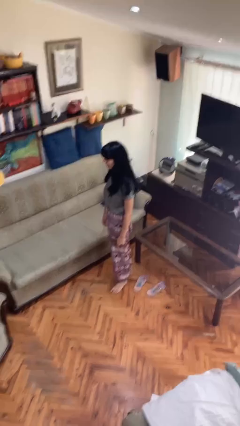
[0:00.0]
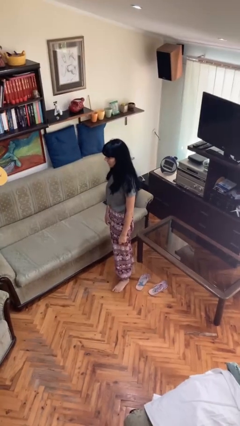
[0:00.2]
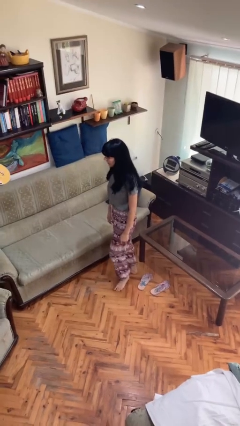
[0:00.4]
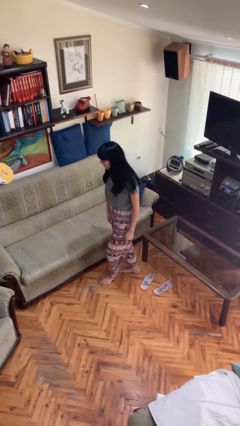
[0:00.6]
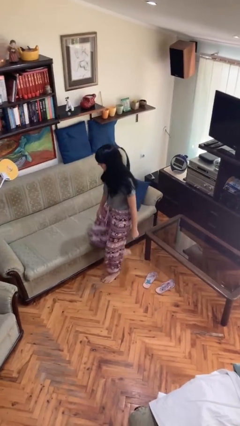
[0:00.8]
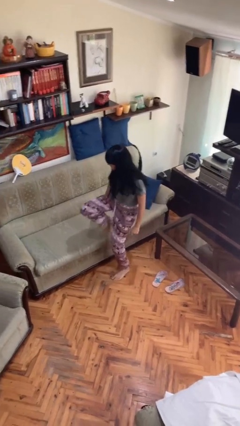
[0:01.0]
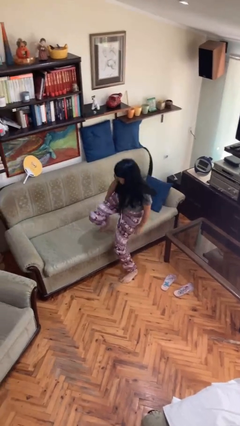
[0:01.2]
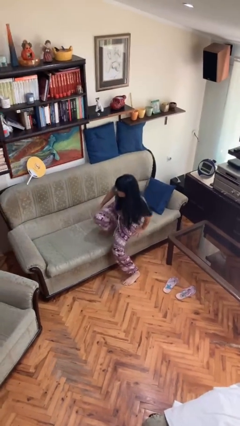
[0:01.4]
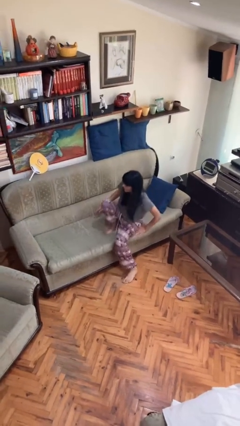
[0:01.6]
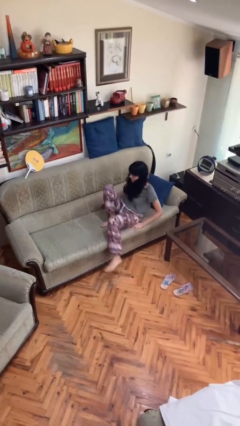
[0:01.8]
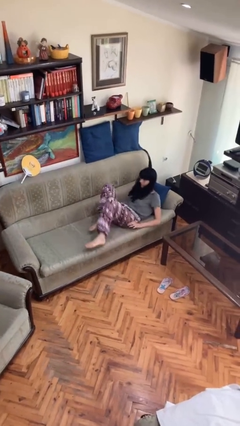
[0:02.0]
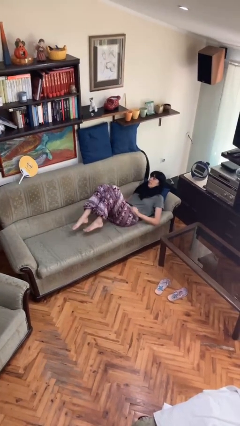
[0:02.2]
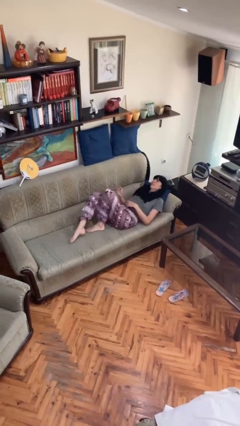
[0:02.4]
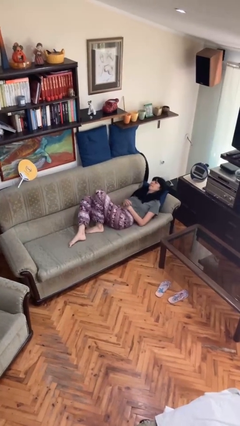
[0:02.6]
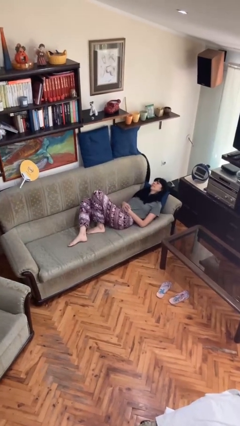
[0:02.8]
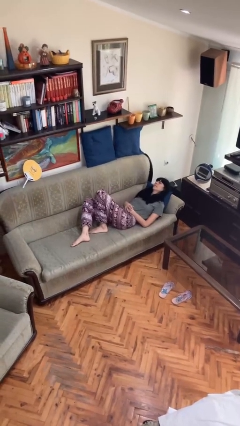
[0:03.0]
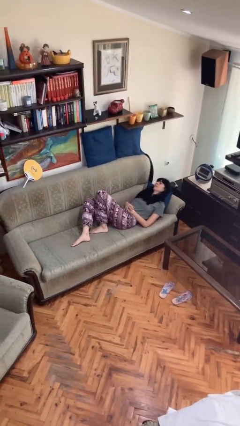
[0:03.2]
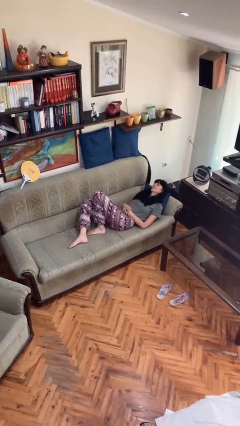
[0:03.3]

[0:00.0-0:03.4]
person lies down on couch

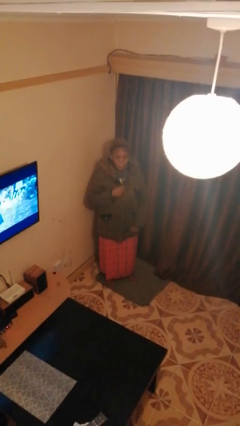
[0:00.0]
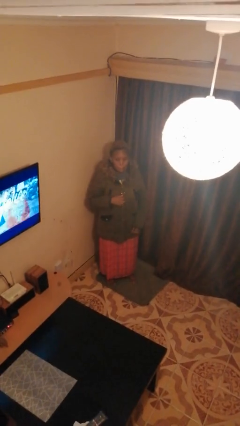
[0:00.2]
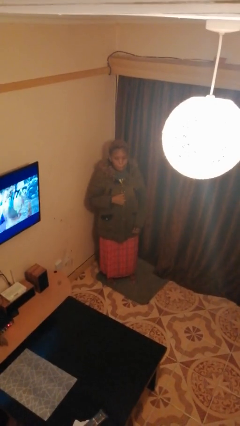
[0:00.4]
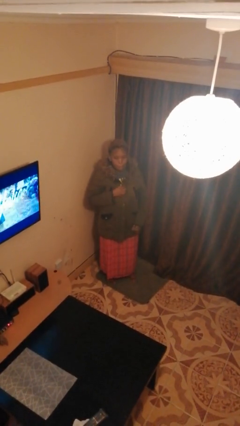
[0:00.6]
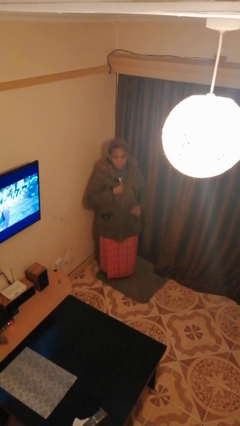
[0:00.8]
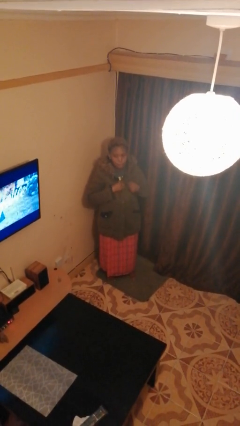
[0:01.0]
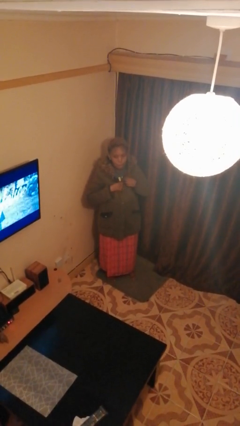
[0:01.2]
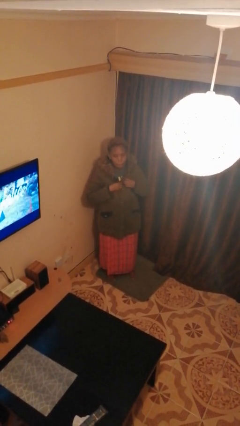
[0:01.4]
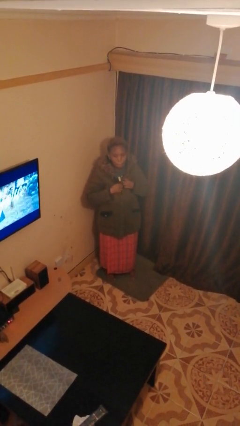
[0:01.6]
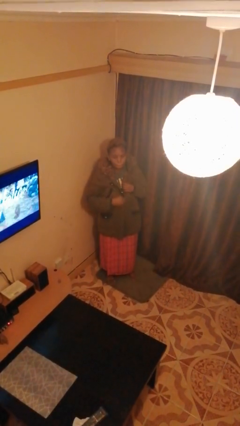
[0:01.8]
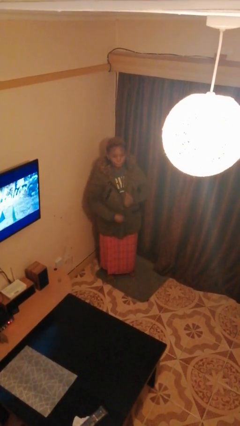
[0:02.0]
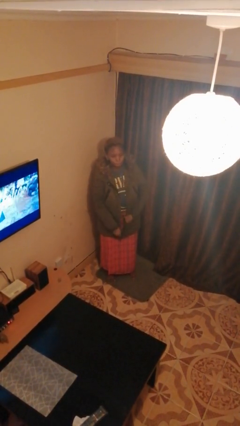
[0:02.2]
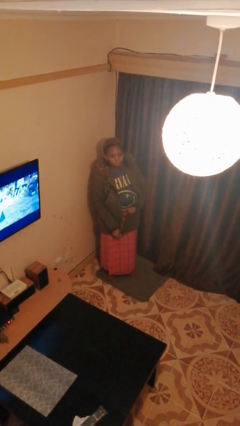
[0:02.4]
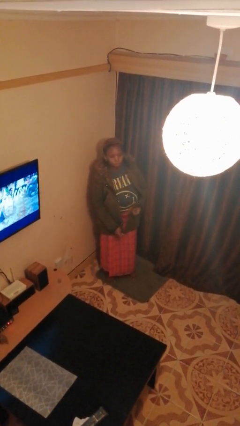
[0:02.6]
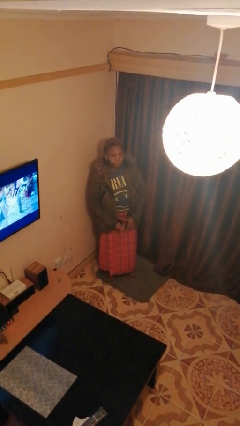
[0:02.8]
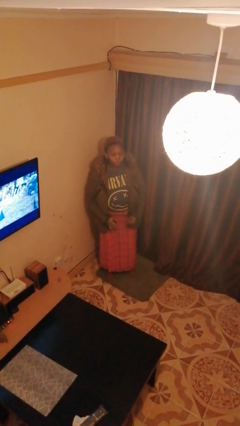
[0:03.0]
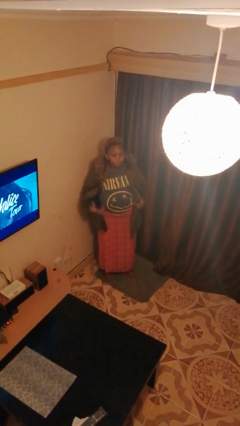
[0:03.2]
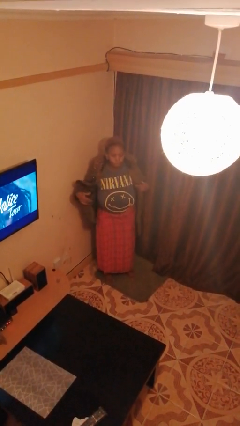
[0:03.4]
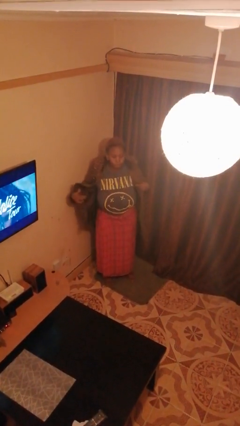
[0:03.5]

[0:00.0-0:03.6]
person unzips jacket

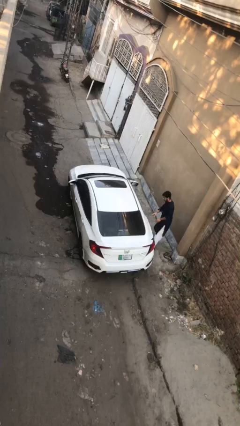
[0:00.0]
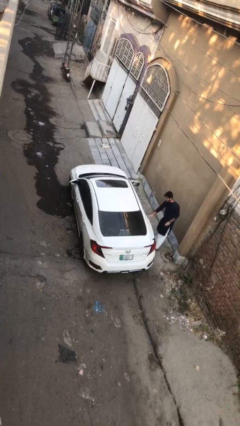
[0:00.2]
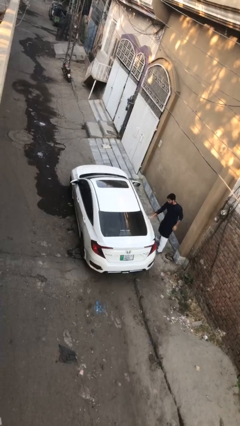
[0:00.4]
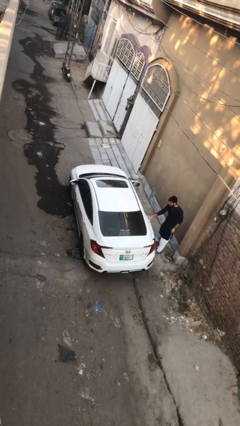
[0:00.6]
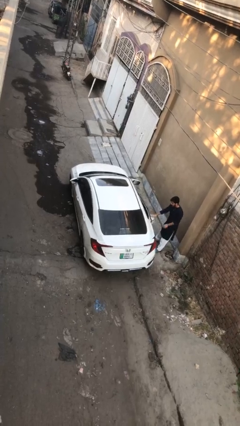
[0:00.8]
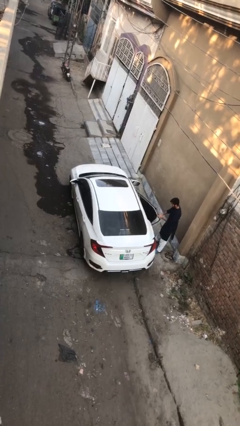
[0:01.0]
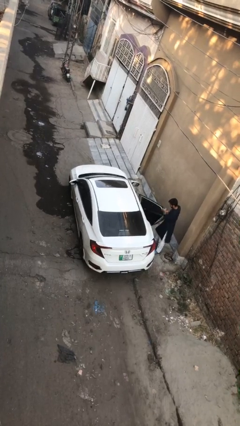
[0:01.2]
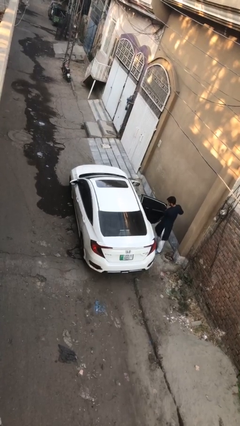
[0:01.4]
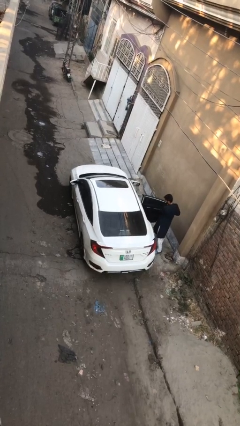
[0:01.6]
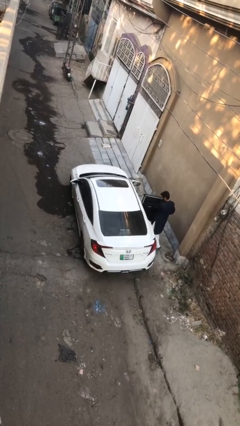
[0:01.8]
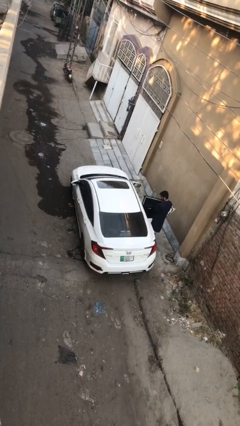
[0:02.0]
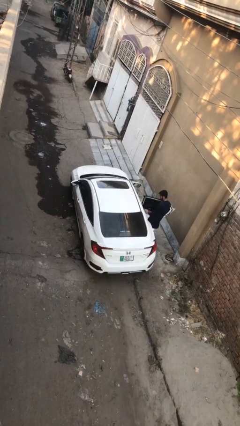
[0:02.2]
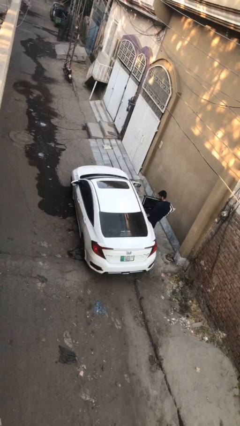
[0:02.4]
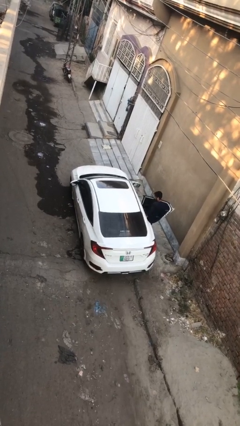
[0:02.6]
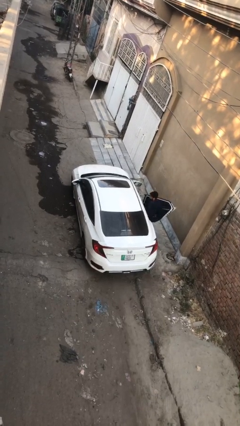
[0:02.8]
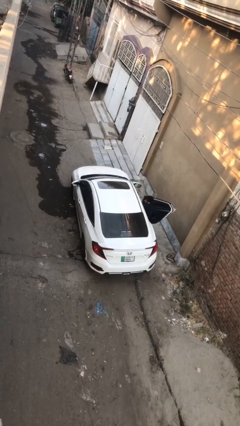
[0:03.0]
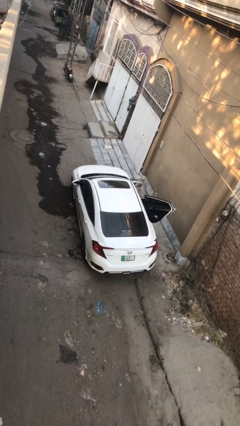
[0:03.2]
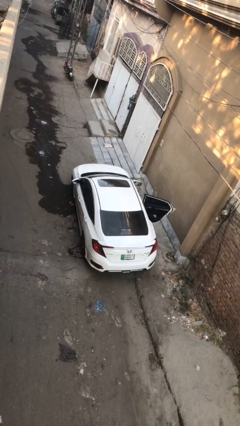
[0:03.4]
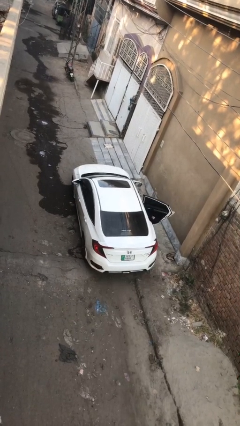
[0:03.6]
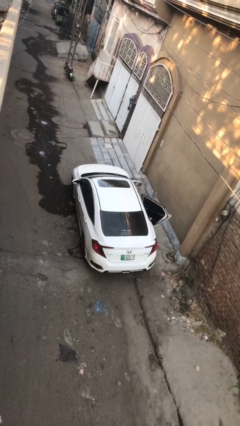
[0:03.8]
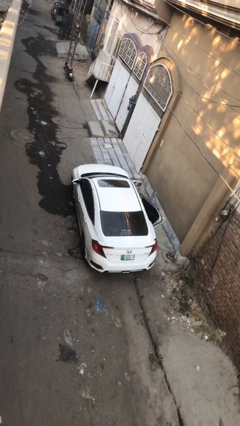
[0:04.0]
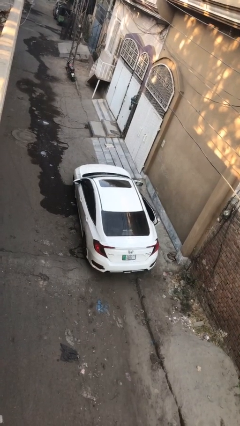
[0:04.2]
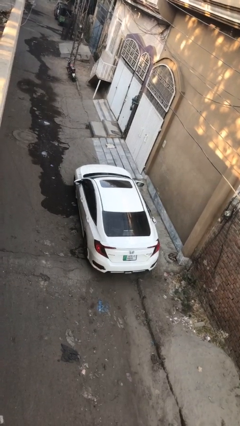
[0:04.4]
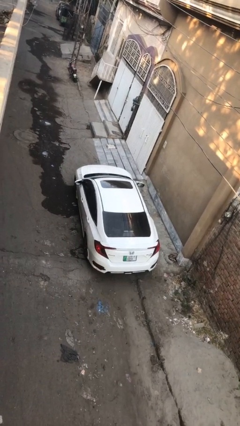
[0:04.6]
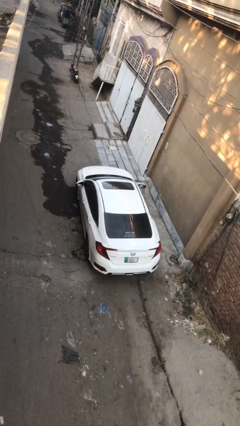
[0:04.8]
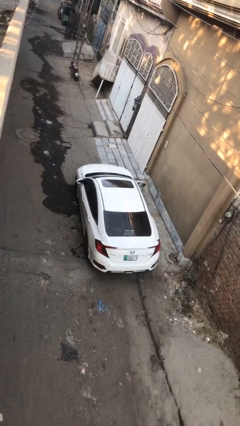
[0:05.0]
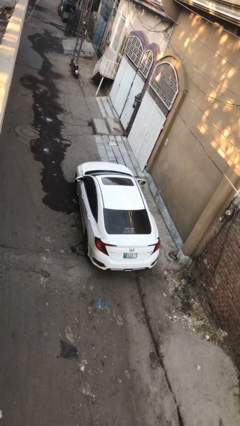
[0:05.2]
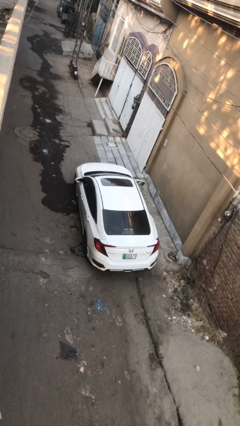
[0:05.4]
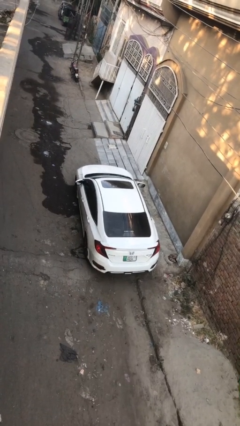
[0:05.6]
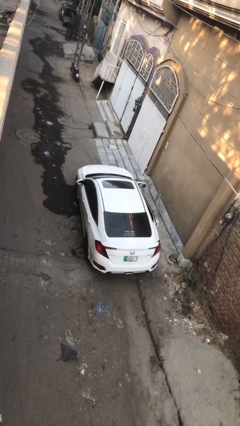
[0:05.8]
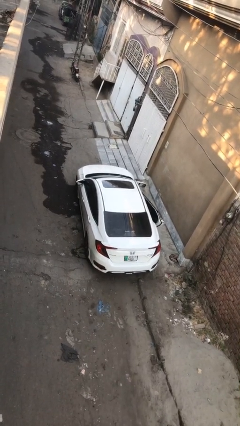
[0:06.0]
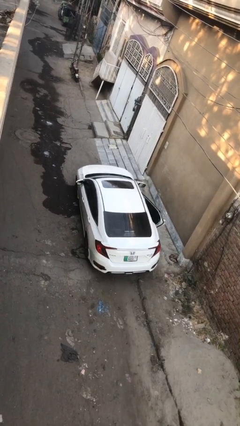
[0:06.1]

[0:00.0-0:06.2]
car picks up person

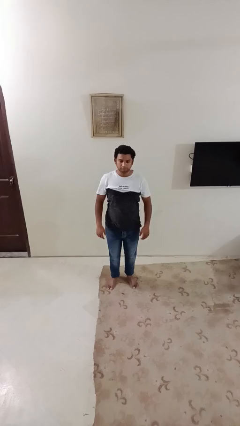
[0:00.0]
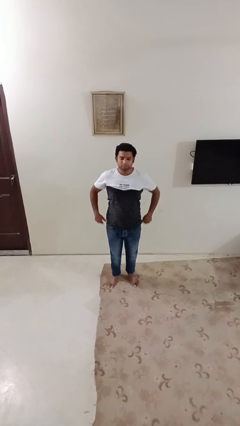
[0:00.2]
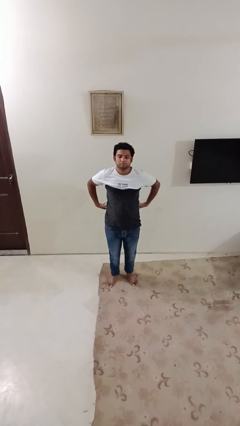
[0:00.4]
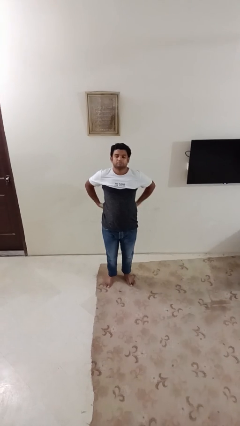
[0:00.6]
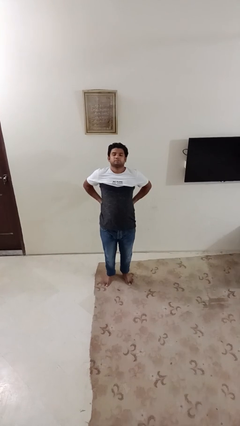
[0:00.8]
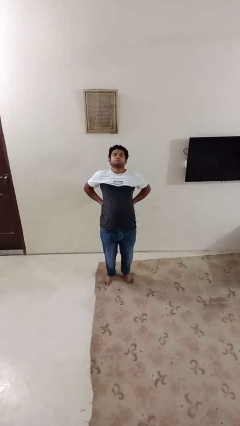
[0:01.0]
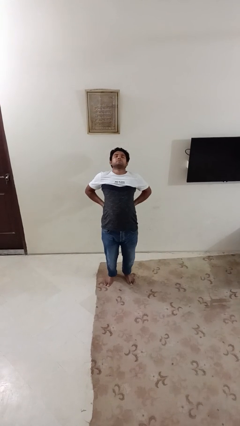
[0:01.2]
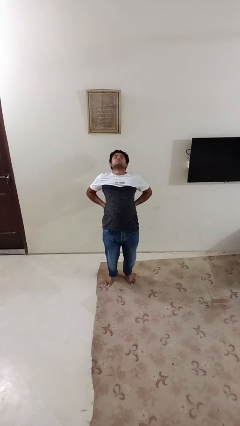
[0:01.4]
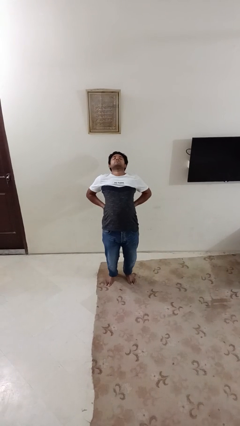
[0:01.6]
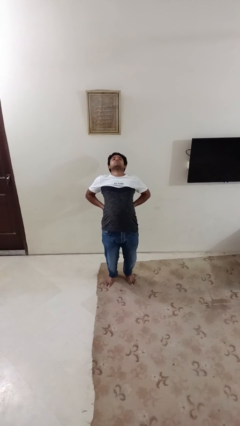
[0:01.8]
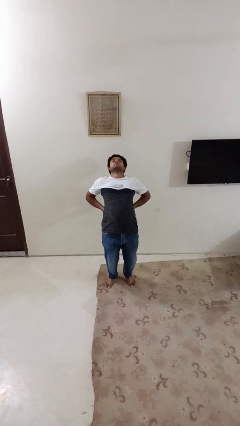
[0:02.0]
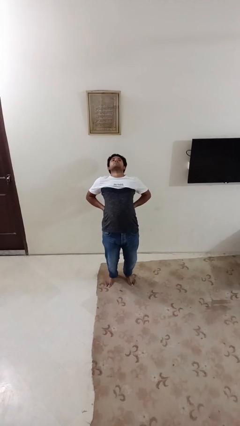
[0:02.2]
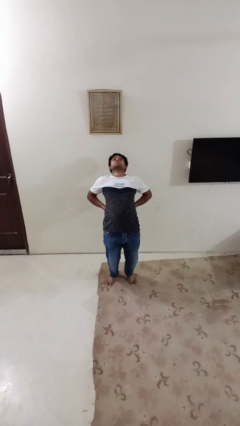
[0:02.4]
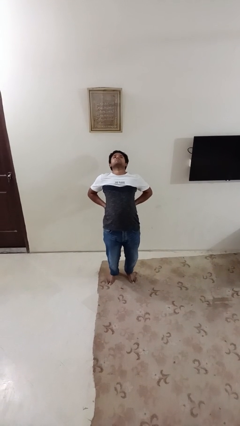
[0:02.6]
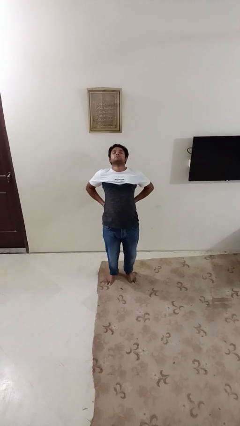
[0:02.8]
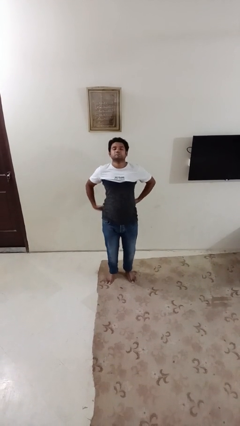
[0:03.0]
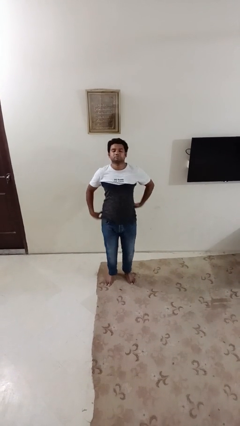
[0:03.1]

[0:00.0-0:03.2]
person stretches back

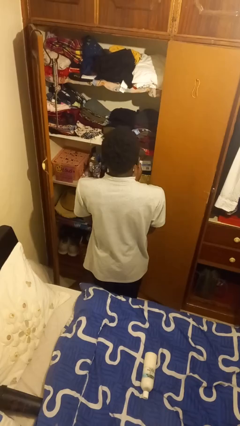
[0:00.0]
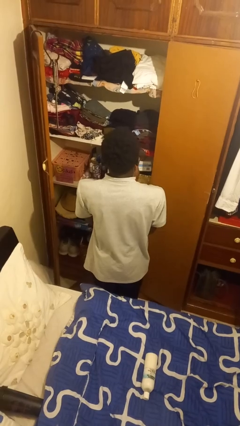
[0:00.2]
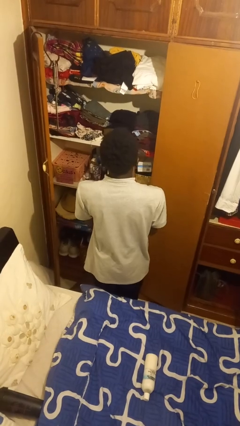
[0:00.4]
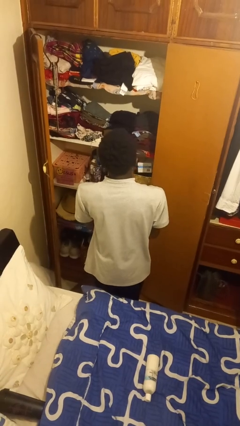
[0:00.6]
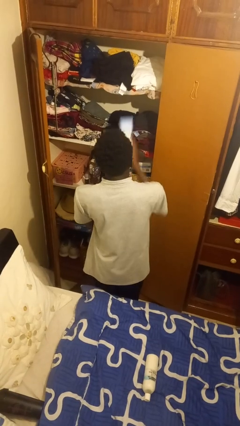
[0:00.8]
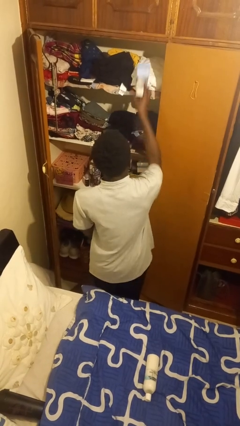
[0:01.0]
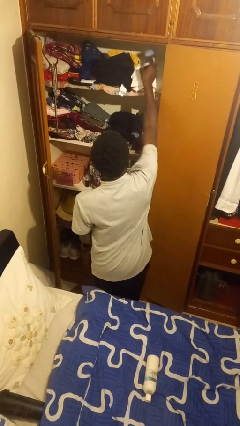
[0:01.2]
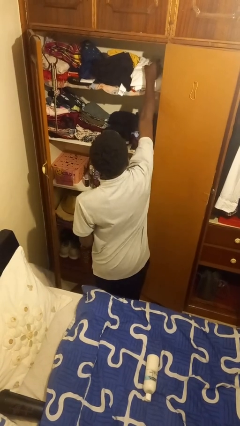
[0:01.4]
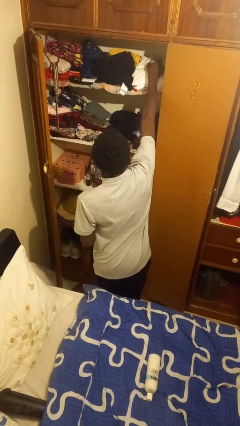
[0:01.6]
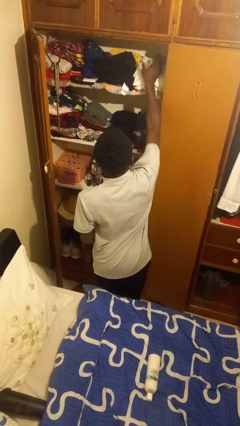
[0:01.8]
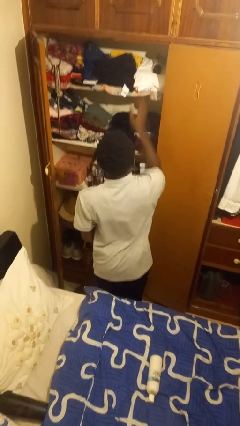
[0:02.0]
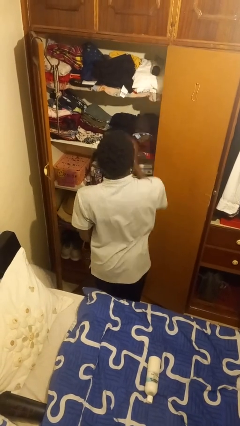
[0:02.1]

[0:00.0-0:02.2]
person puts down object on shelf
